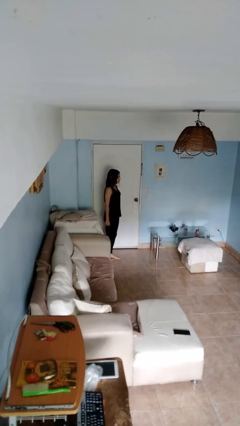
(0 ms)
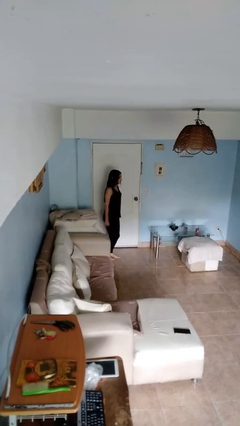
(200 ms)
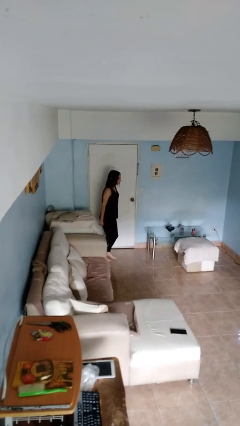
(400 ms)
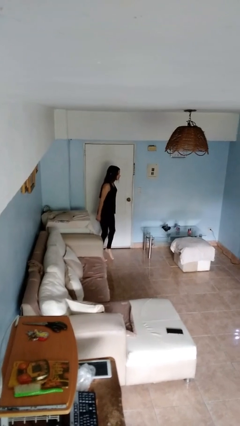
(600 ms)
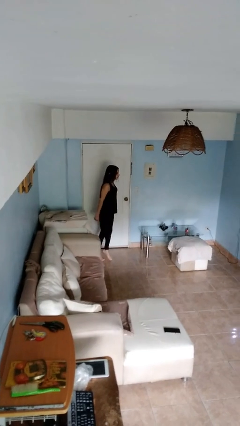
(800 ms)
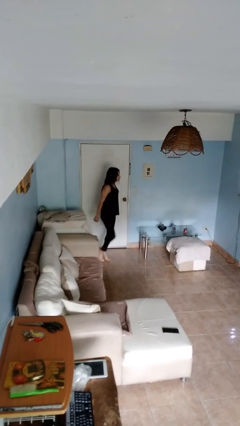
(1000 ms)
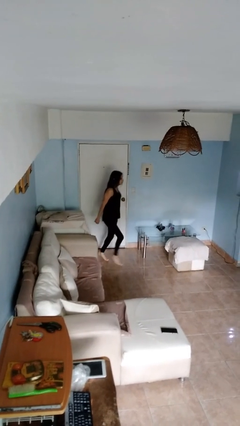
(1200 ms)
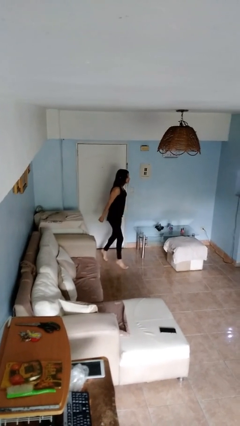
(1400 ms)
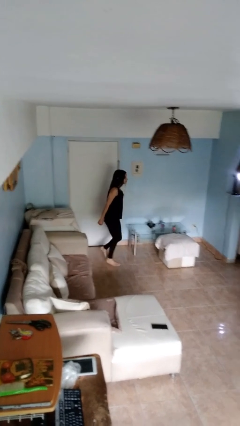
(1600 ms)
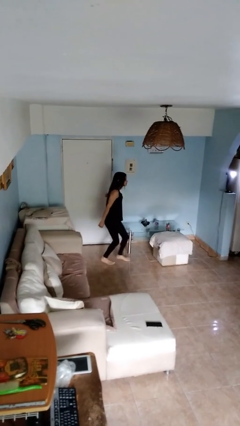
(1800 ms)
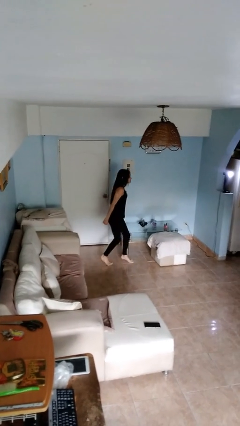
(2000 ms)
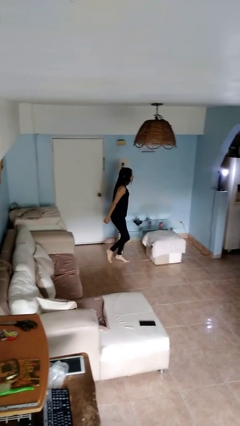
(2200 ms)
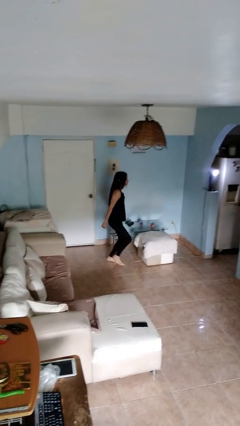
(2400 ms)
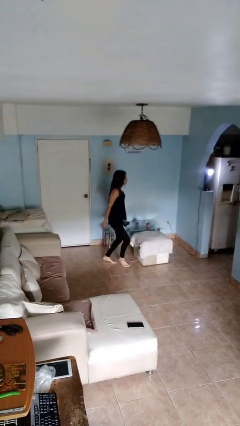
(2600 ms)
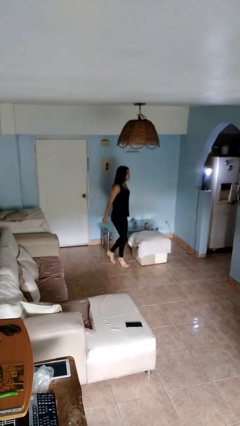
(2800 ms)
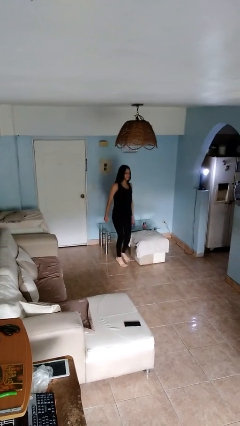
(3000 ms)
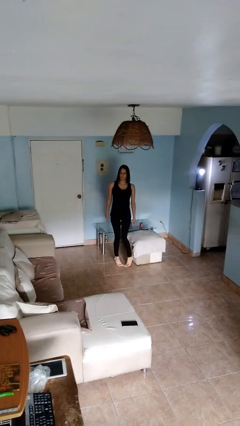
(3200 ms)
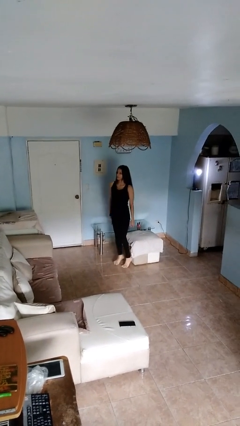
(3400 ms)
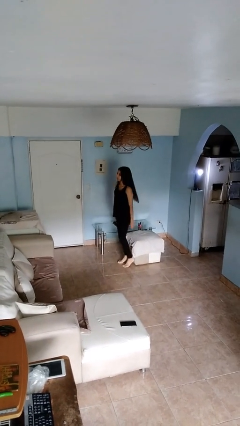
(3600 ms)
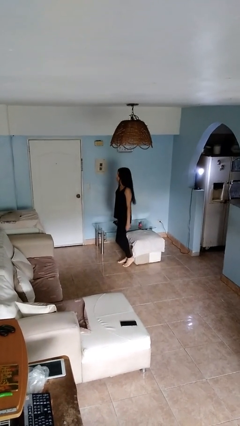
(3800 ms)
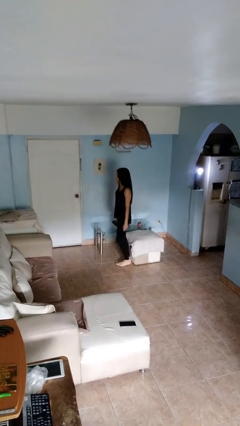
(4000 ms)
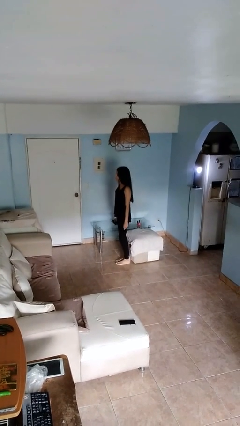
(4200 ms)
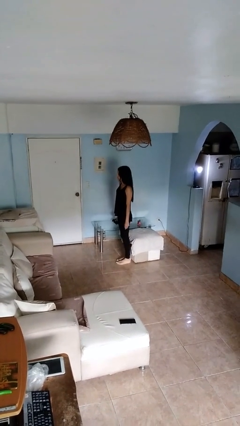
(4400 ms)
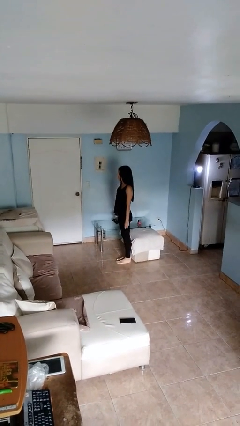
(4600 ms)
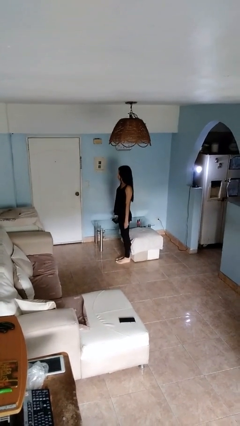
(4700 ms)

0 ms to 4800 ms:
person walks tiptoe

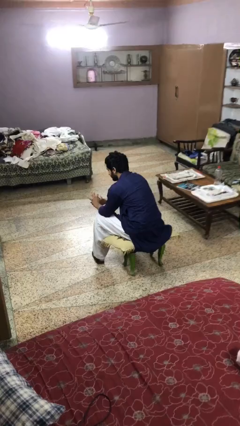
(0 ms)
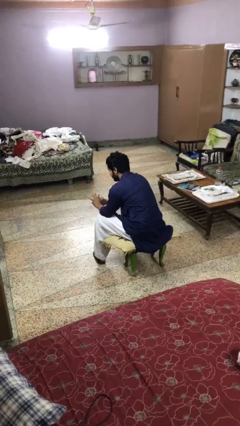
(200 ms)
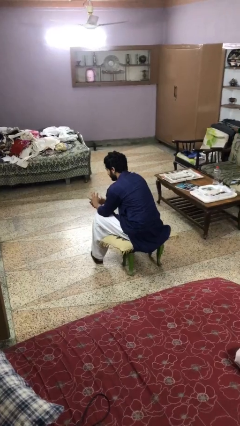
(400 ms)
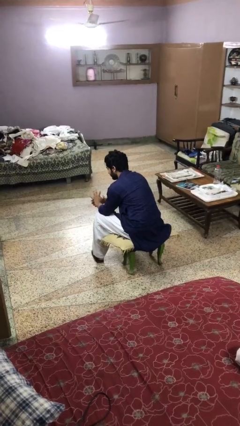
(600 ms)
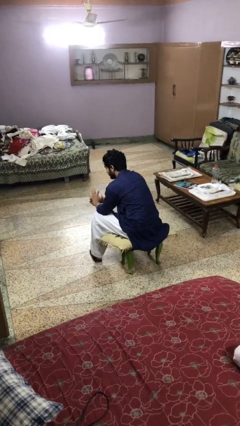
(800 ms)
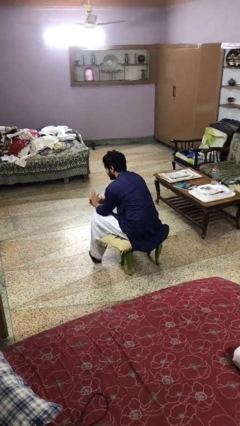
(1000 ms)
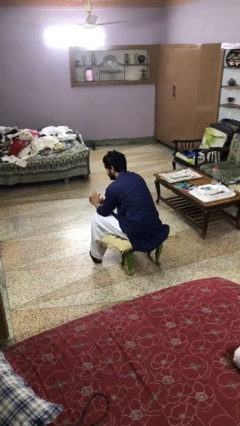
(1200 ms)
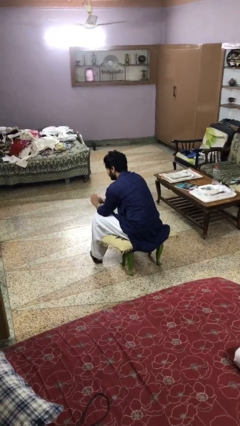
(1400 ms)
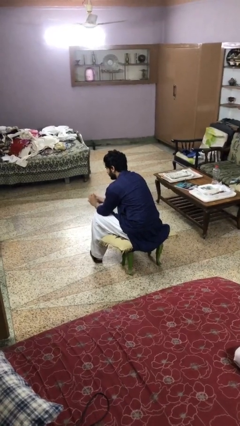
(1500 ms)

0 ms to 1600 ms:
person takes off ring

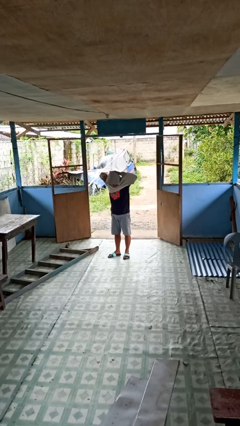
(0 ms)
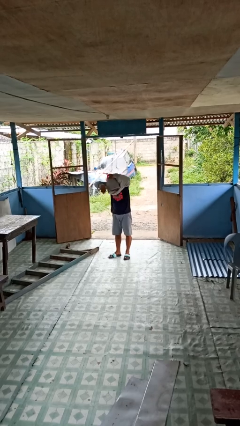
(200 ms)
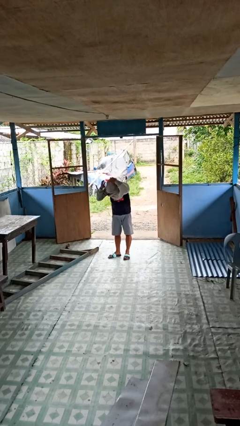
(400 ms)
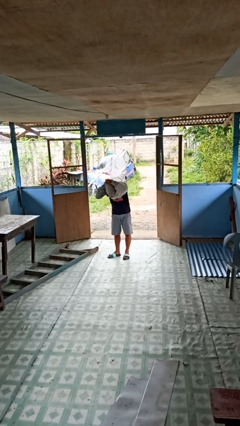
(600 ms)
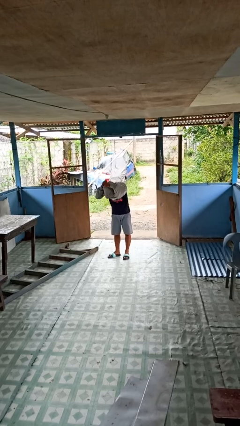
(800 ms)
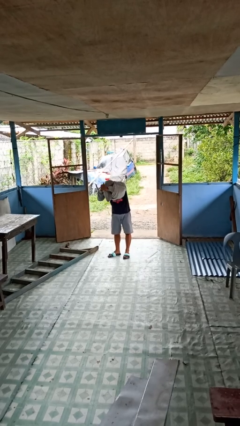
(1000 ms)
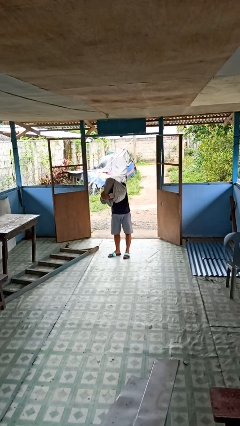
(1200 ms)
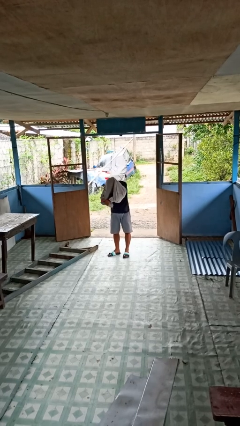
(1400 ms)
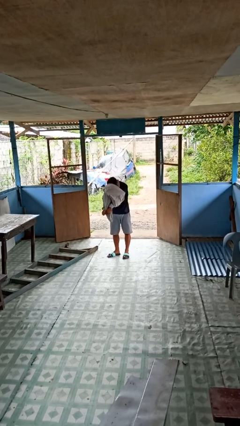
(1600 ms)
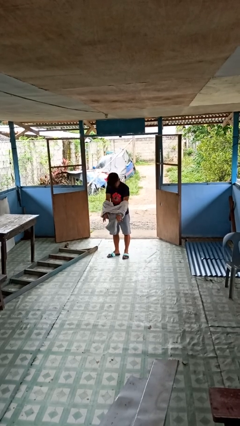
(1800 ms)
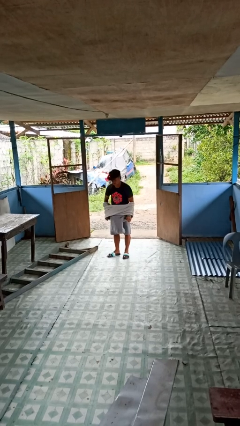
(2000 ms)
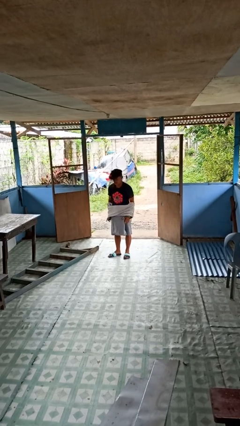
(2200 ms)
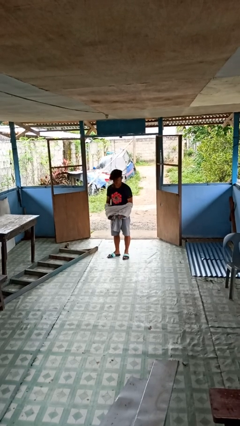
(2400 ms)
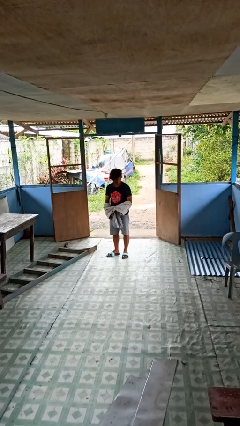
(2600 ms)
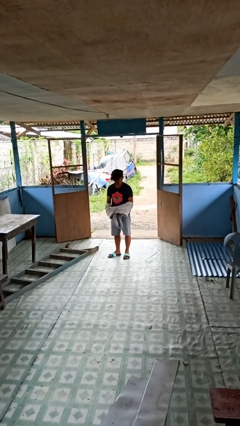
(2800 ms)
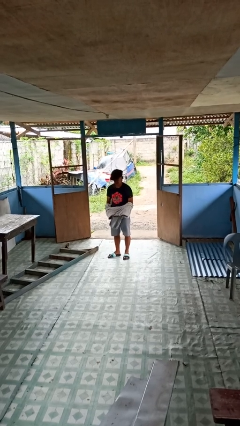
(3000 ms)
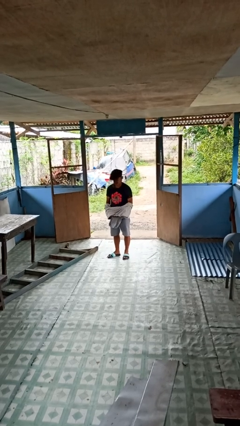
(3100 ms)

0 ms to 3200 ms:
person takes off hoodie

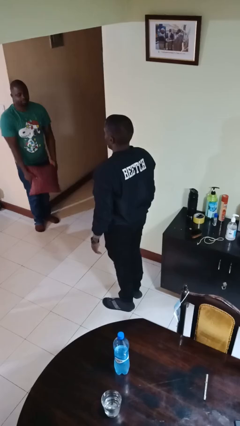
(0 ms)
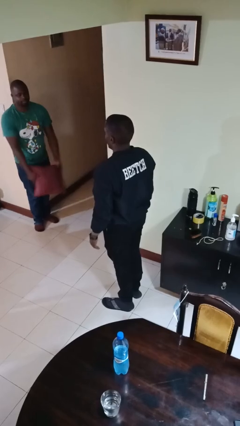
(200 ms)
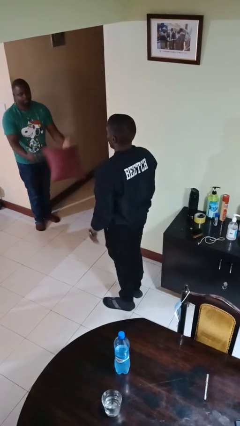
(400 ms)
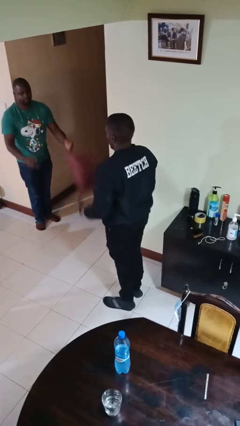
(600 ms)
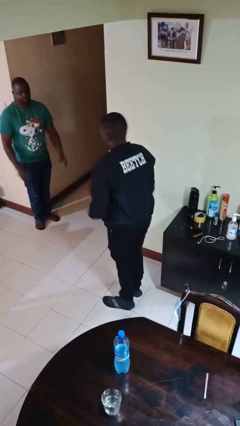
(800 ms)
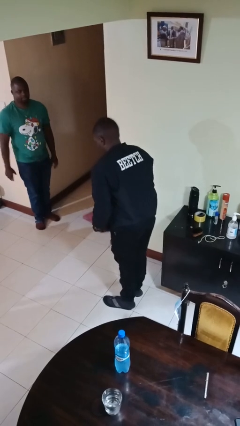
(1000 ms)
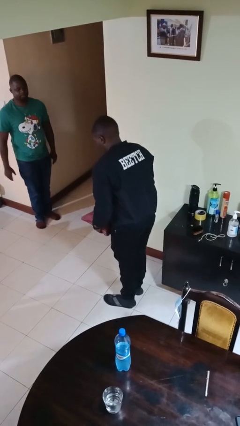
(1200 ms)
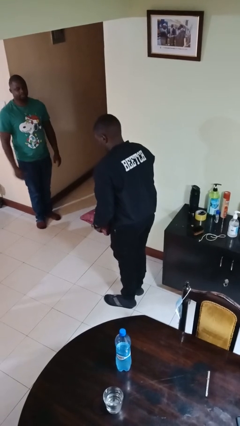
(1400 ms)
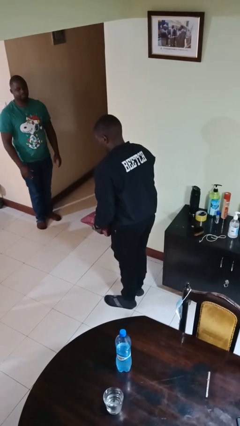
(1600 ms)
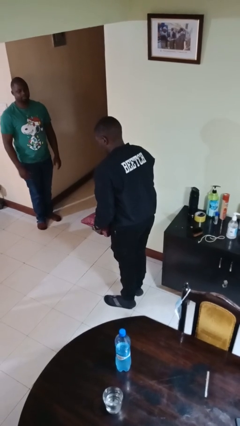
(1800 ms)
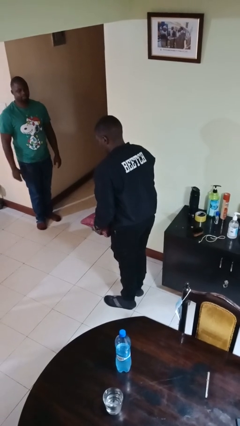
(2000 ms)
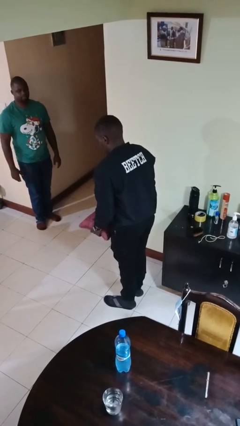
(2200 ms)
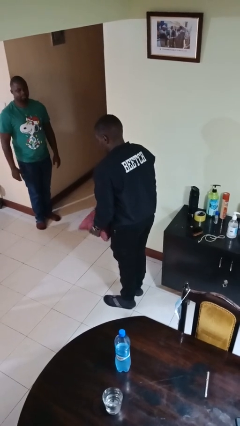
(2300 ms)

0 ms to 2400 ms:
person catches object from person

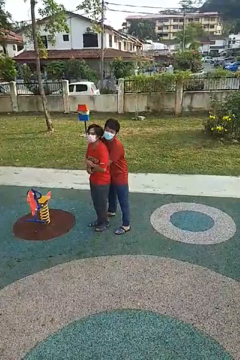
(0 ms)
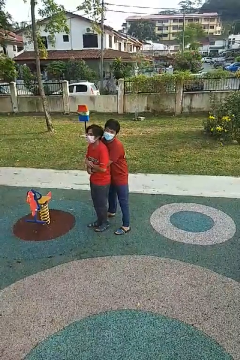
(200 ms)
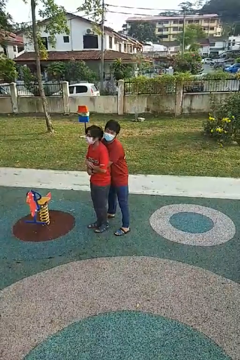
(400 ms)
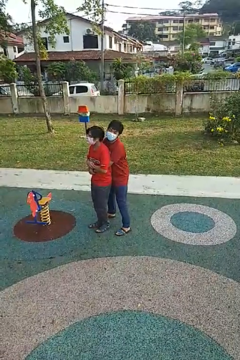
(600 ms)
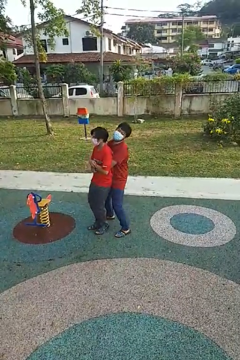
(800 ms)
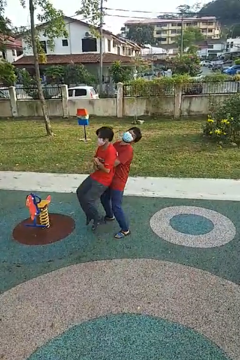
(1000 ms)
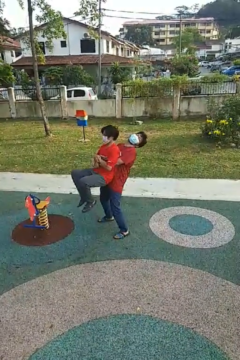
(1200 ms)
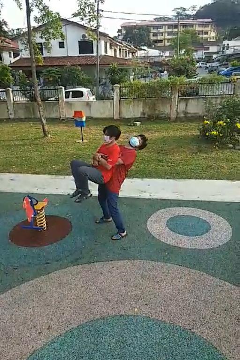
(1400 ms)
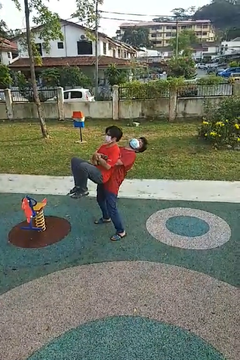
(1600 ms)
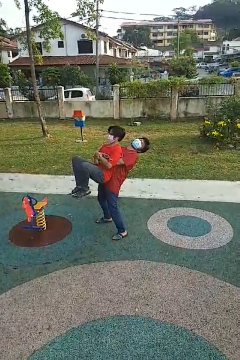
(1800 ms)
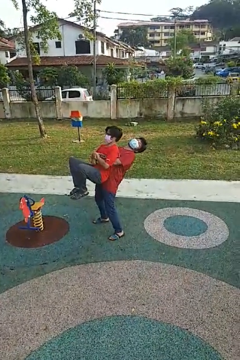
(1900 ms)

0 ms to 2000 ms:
person picks up person

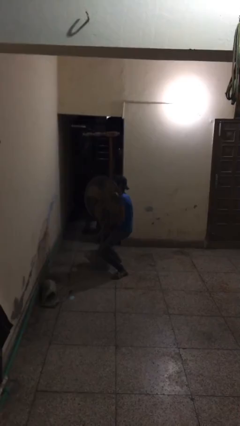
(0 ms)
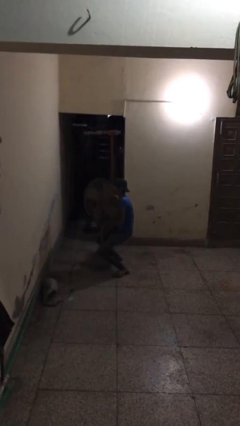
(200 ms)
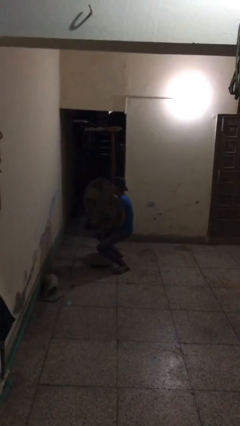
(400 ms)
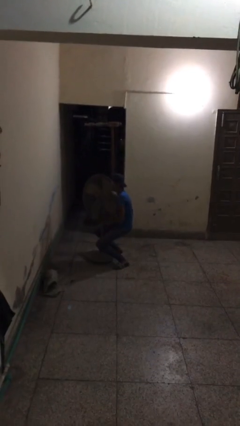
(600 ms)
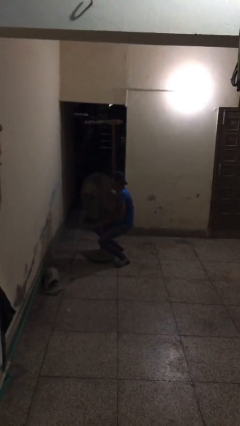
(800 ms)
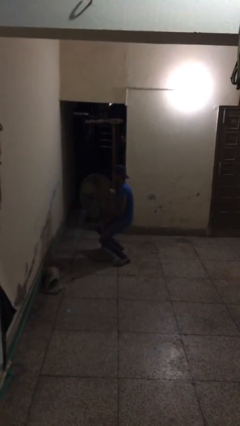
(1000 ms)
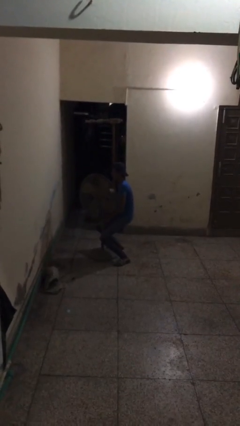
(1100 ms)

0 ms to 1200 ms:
person puts down object on floor

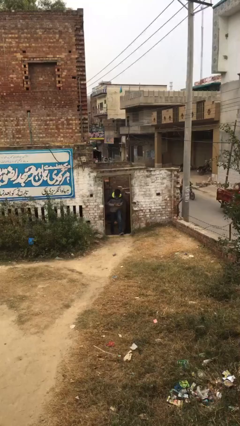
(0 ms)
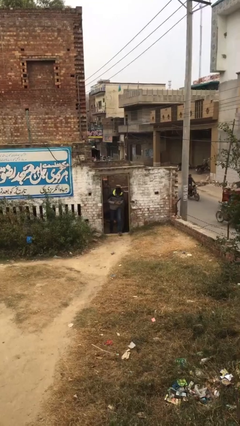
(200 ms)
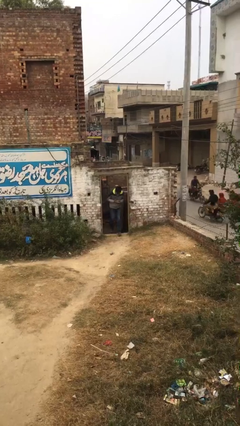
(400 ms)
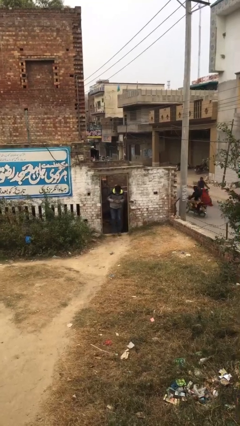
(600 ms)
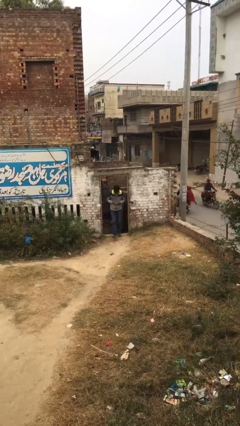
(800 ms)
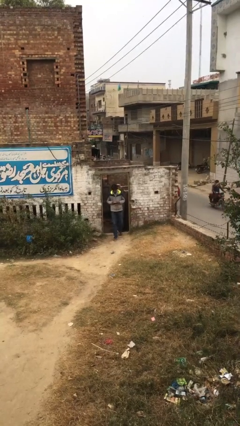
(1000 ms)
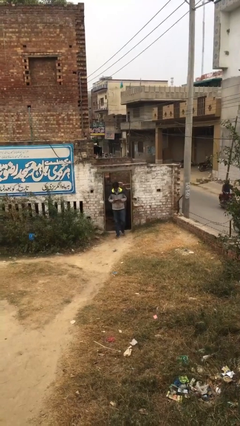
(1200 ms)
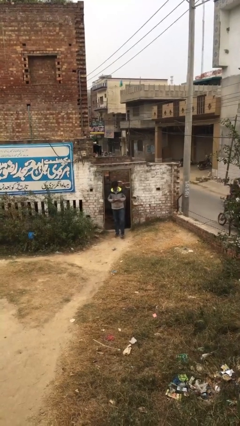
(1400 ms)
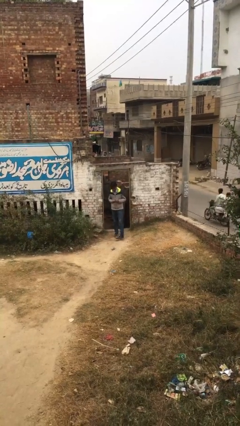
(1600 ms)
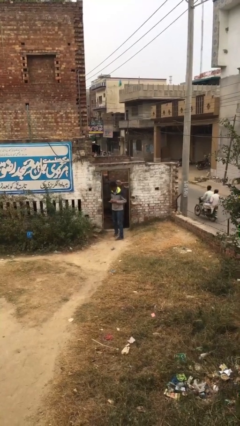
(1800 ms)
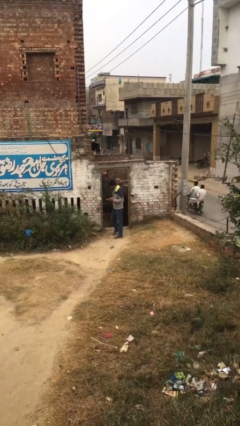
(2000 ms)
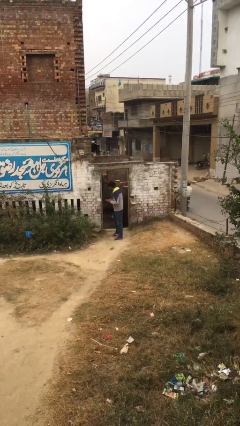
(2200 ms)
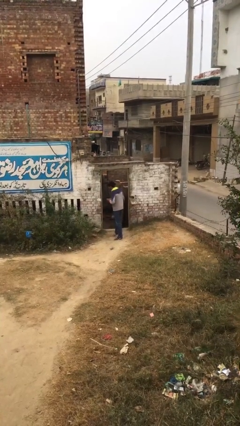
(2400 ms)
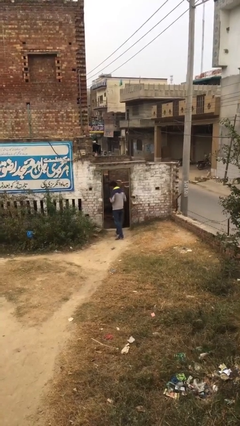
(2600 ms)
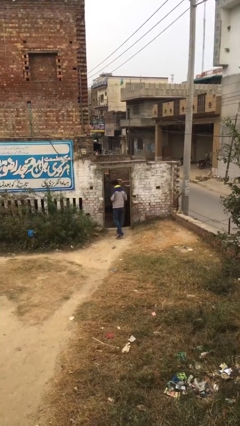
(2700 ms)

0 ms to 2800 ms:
person exits scene through structure
